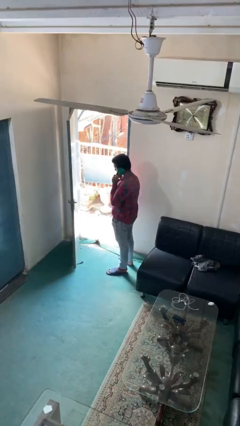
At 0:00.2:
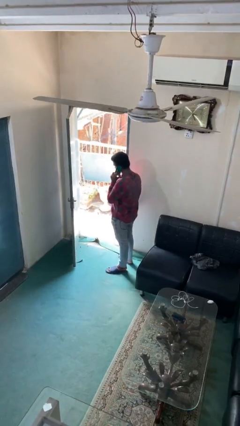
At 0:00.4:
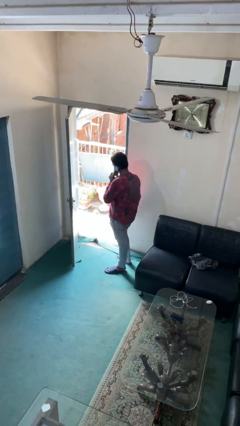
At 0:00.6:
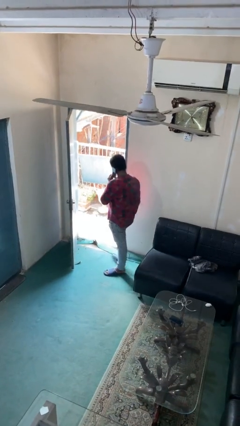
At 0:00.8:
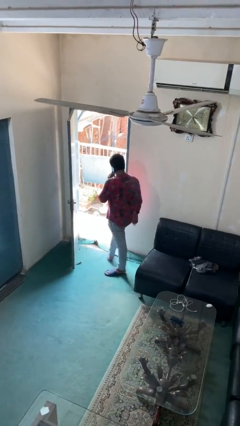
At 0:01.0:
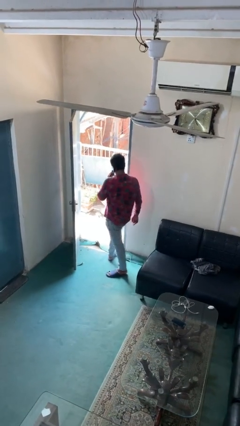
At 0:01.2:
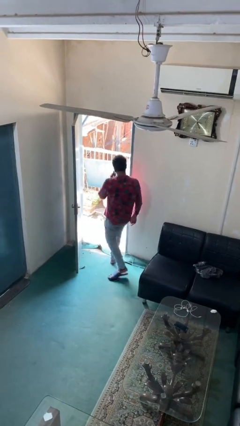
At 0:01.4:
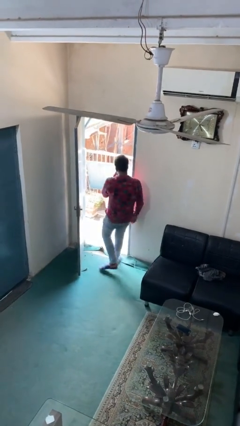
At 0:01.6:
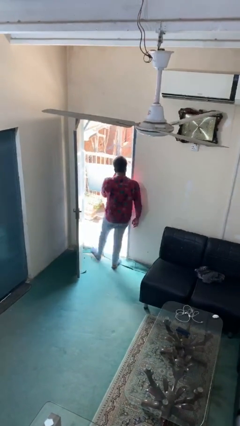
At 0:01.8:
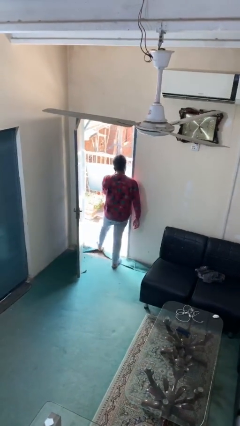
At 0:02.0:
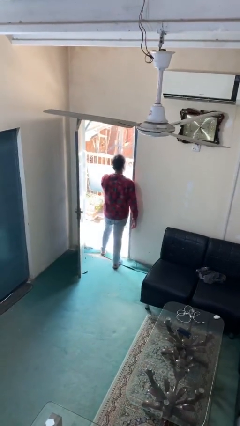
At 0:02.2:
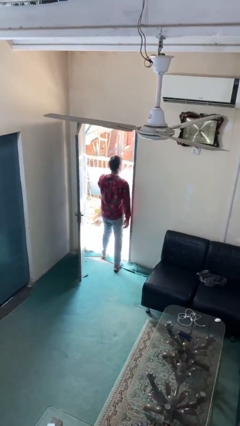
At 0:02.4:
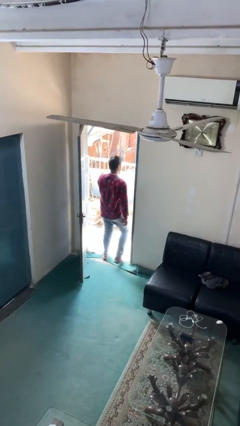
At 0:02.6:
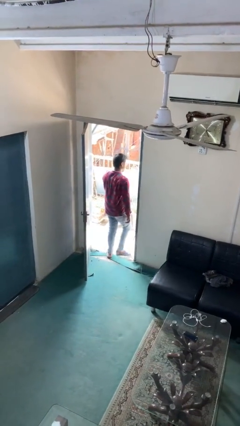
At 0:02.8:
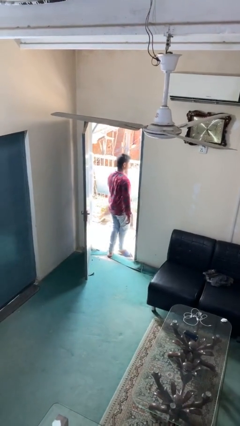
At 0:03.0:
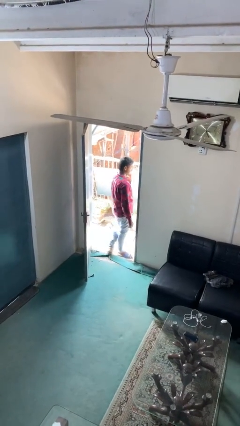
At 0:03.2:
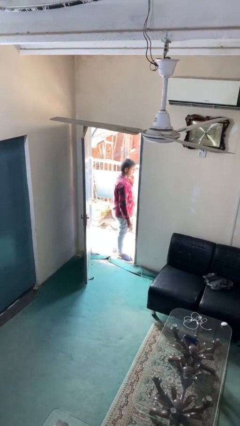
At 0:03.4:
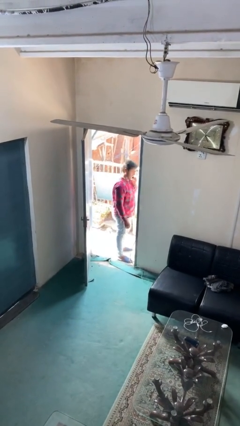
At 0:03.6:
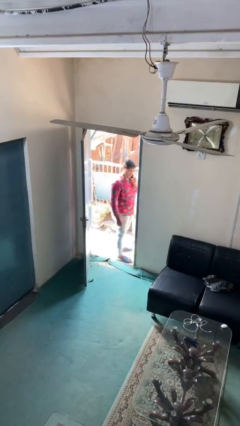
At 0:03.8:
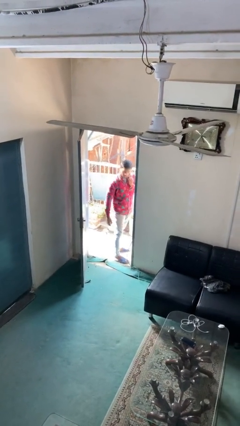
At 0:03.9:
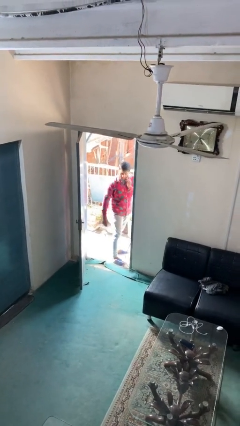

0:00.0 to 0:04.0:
person exits scene through structure

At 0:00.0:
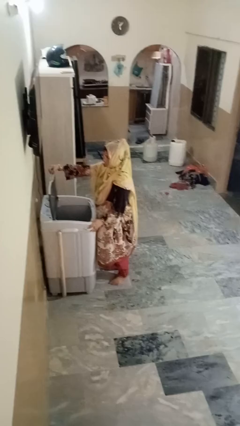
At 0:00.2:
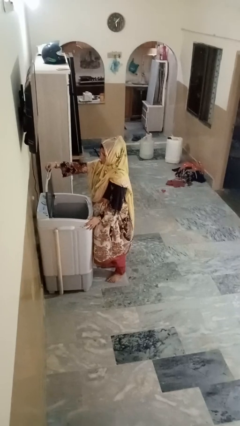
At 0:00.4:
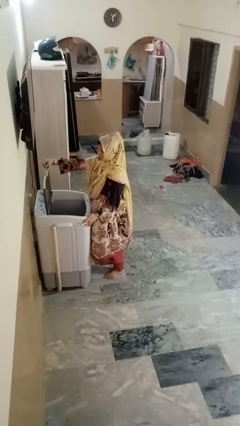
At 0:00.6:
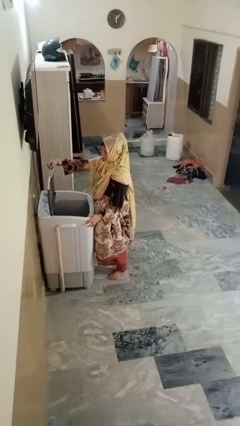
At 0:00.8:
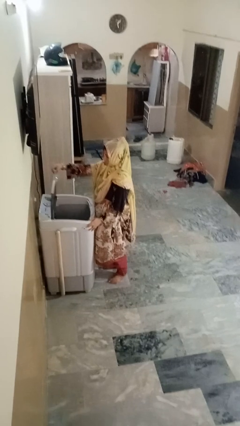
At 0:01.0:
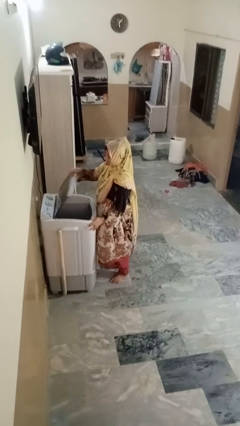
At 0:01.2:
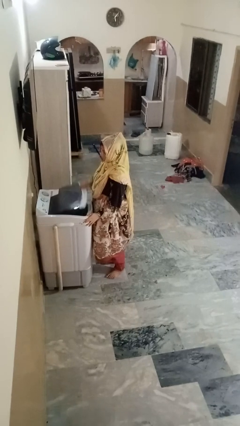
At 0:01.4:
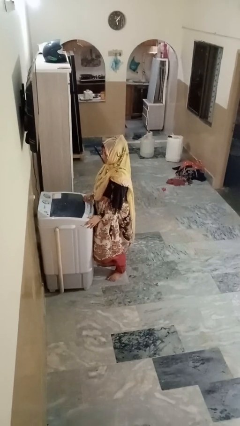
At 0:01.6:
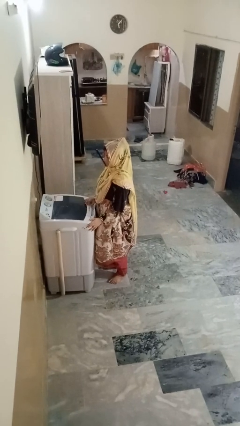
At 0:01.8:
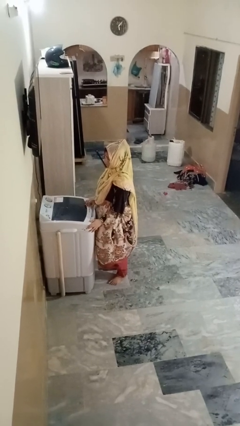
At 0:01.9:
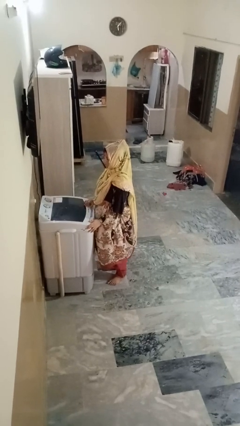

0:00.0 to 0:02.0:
person opens clothes washer

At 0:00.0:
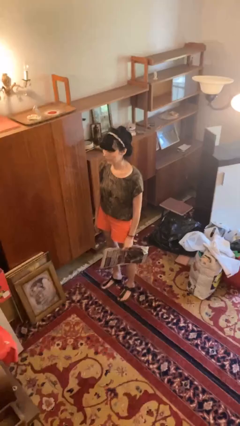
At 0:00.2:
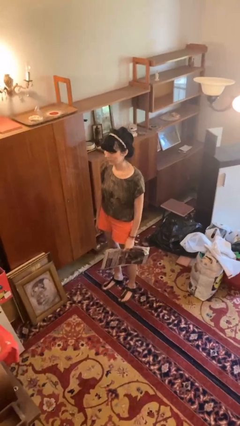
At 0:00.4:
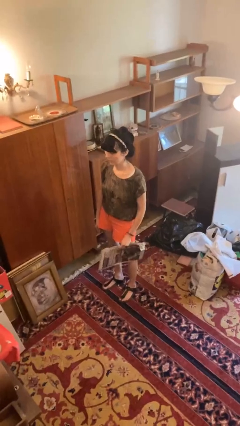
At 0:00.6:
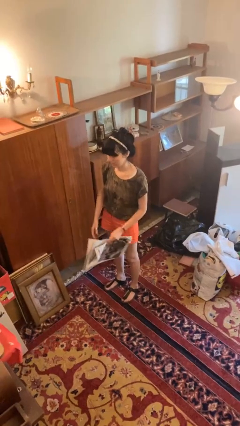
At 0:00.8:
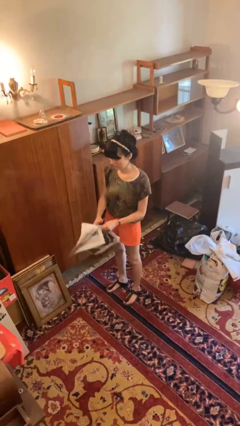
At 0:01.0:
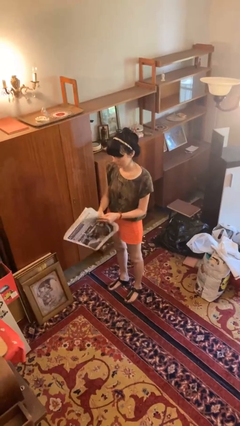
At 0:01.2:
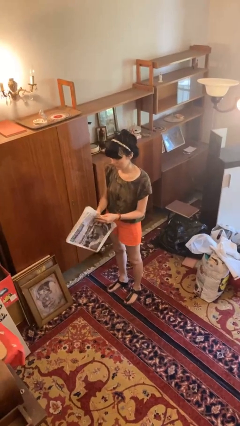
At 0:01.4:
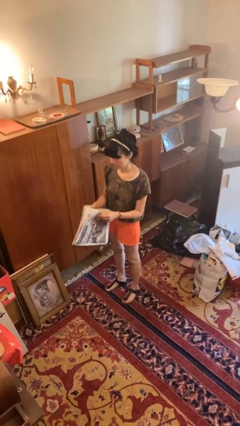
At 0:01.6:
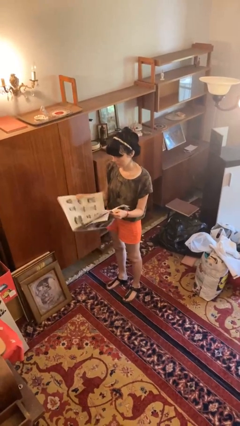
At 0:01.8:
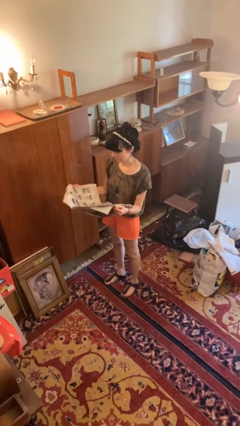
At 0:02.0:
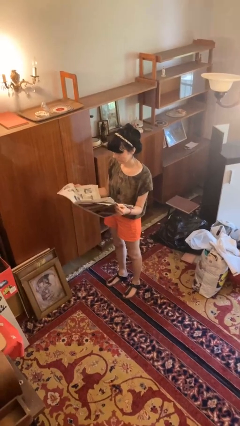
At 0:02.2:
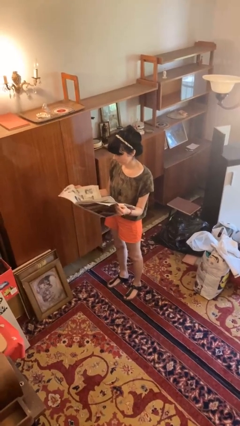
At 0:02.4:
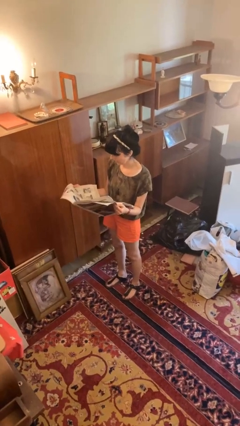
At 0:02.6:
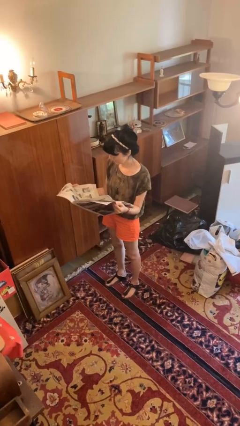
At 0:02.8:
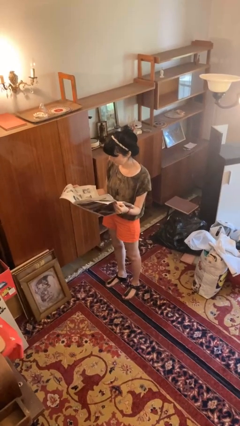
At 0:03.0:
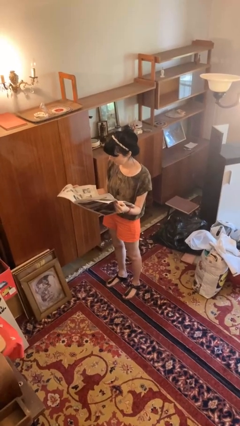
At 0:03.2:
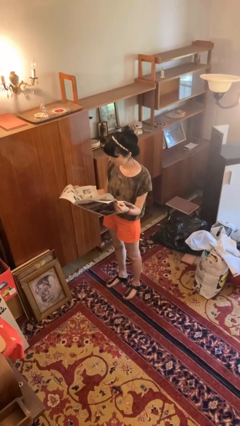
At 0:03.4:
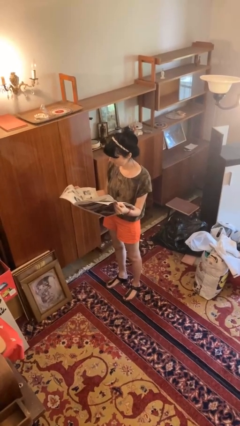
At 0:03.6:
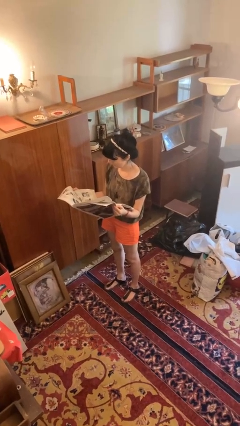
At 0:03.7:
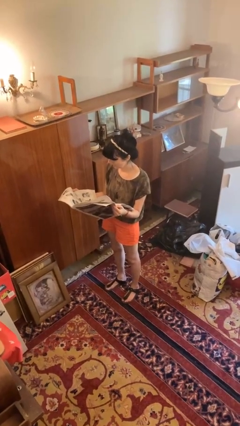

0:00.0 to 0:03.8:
person reads newspaper

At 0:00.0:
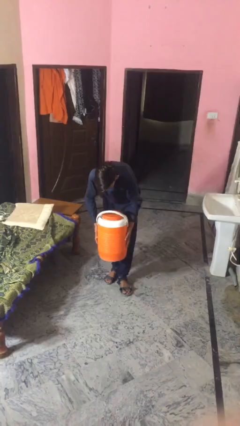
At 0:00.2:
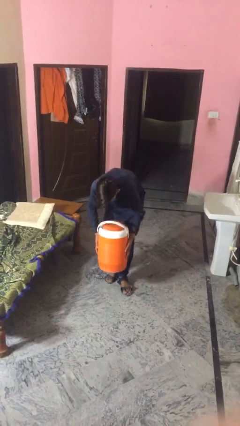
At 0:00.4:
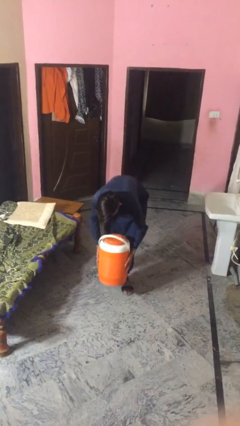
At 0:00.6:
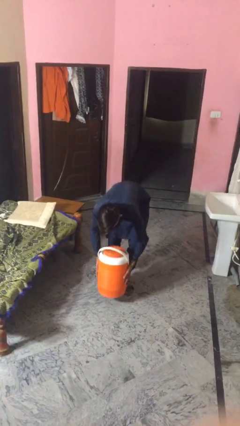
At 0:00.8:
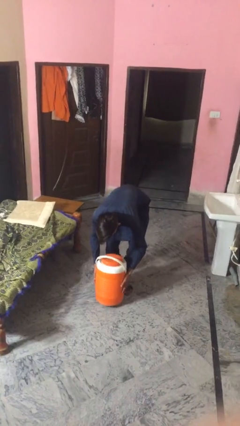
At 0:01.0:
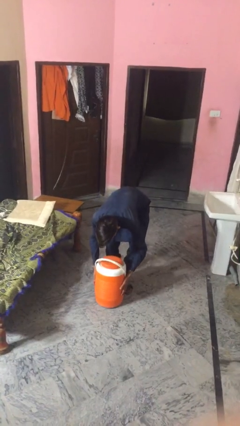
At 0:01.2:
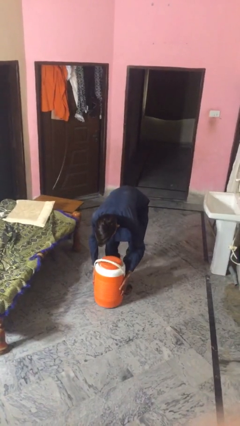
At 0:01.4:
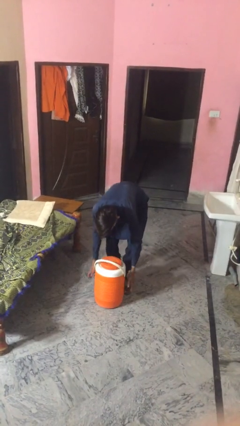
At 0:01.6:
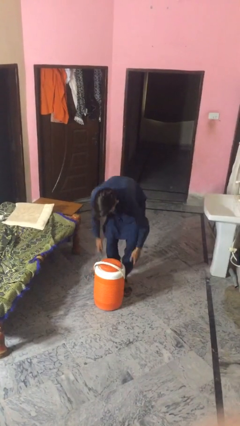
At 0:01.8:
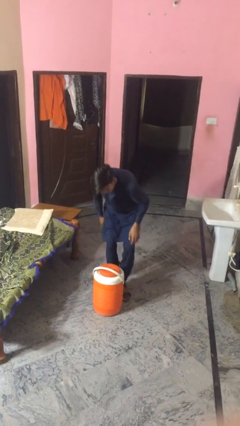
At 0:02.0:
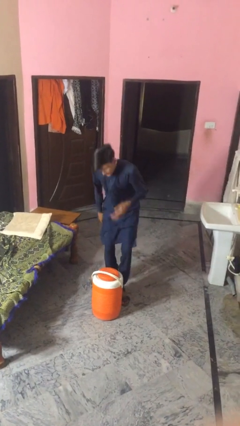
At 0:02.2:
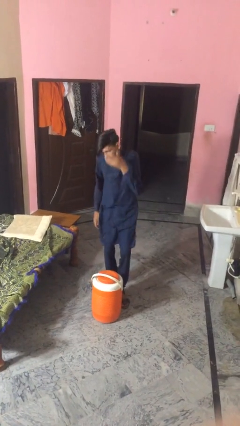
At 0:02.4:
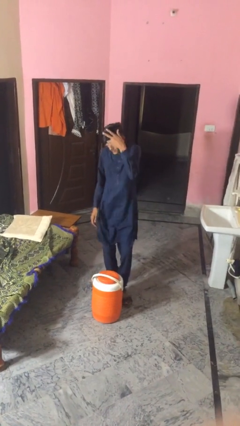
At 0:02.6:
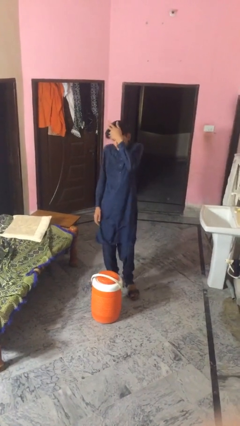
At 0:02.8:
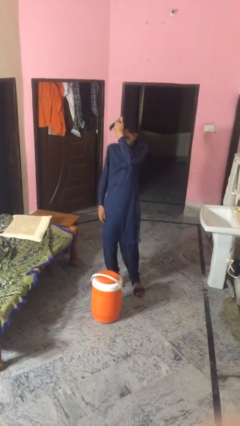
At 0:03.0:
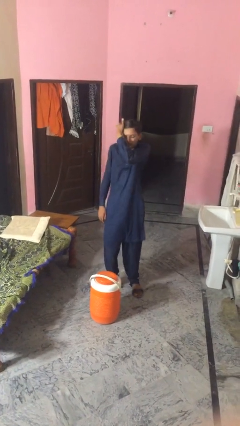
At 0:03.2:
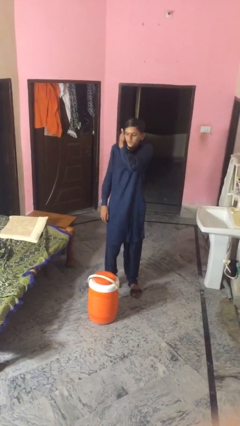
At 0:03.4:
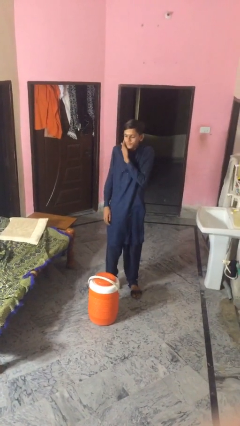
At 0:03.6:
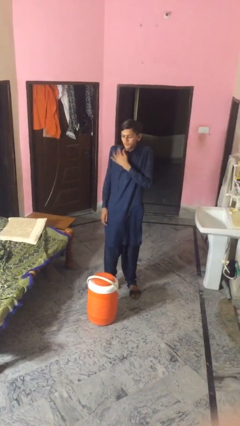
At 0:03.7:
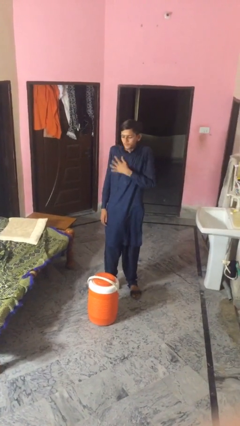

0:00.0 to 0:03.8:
person puts down object on floor

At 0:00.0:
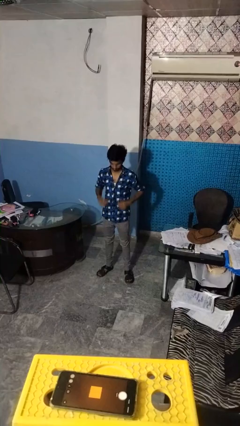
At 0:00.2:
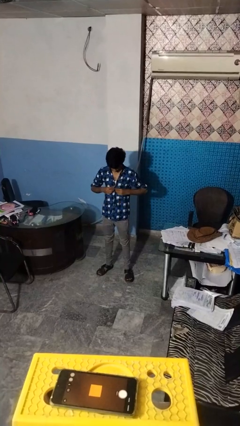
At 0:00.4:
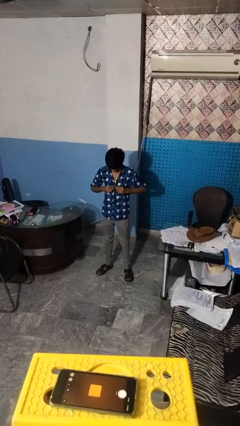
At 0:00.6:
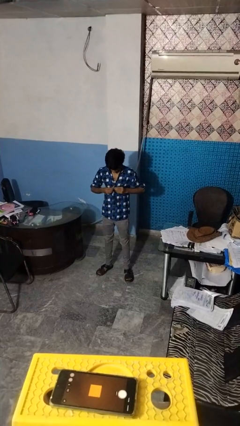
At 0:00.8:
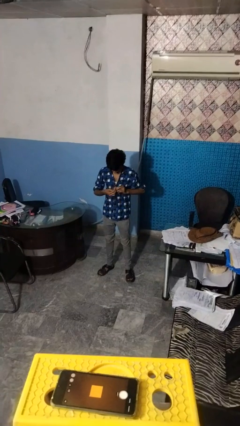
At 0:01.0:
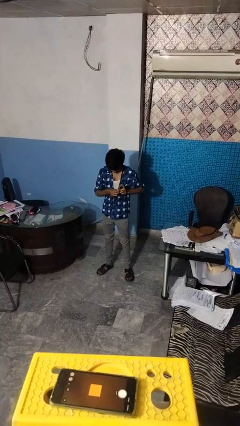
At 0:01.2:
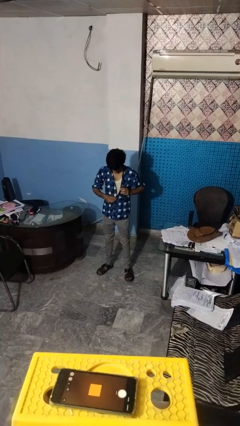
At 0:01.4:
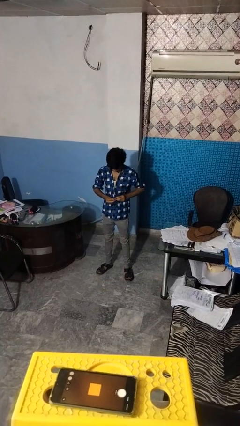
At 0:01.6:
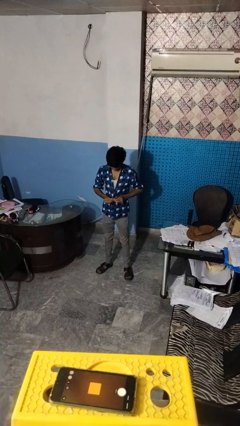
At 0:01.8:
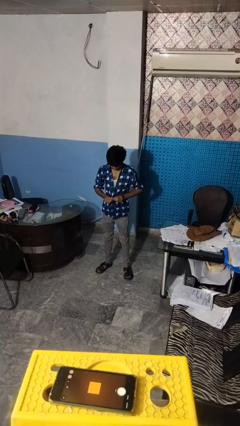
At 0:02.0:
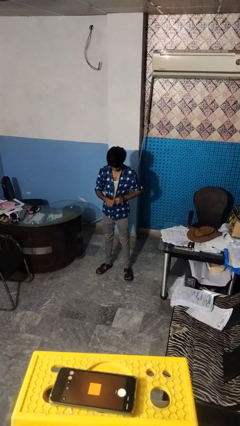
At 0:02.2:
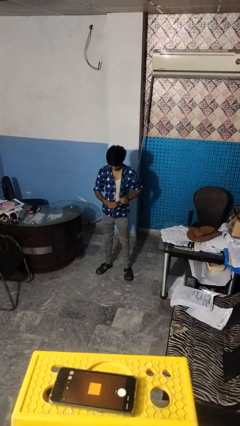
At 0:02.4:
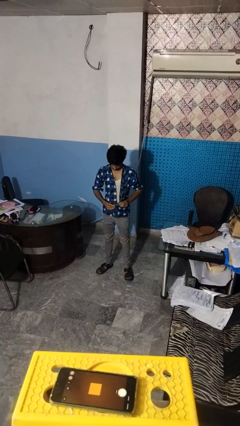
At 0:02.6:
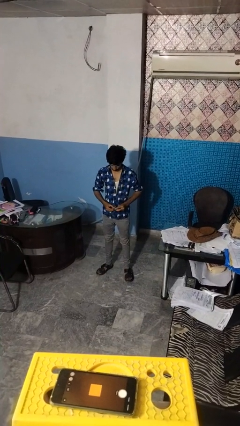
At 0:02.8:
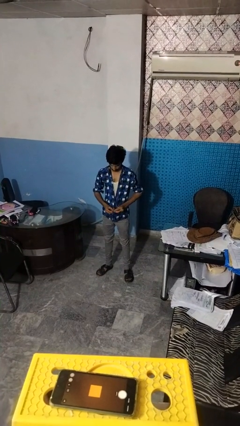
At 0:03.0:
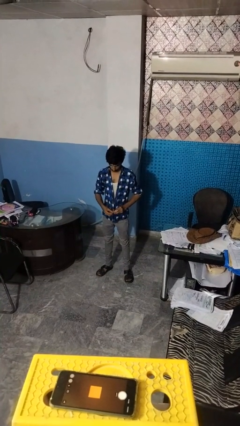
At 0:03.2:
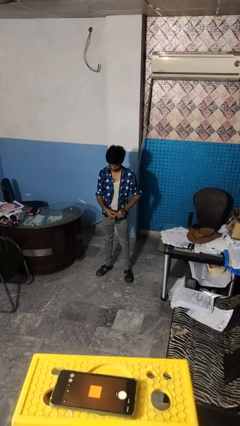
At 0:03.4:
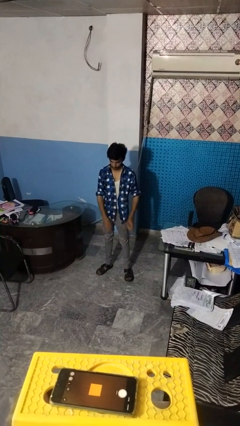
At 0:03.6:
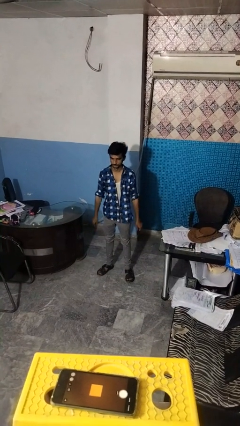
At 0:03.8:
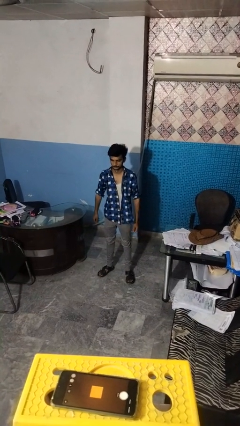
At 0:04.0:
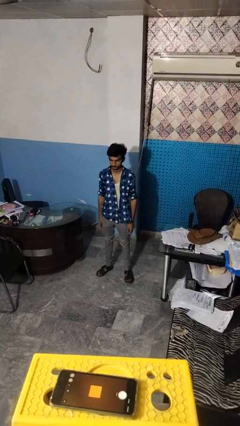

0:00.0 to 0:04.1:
person unbuttons shirt
